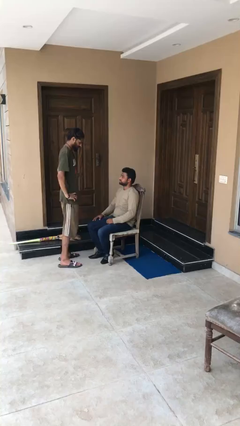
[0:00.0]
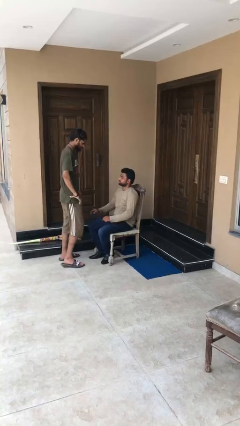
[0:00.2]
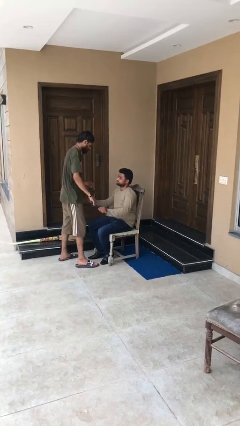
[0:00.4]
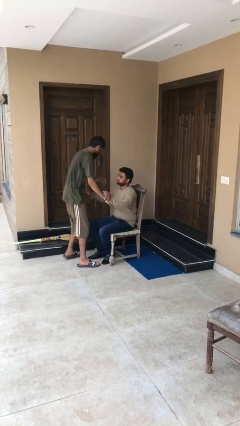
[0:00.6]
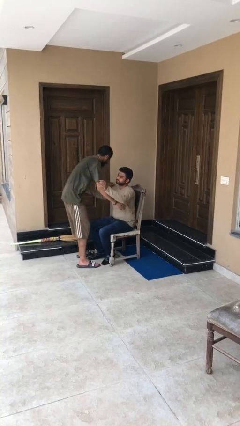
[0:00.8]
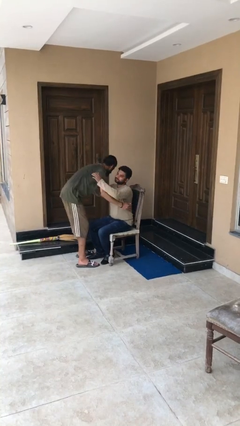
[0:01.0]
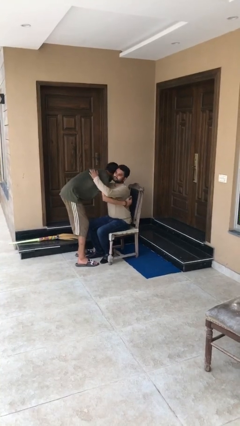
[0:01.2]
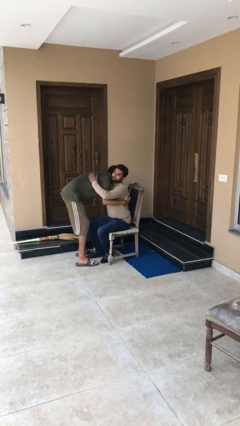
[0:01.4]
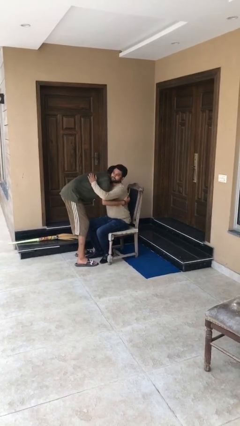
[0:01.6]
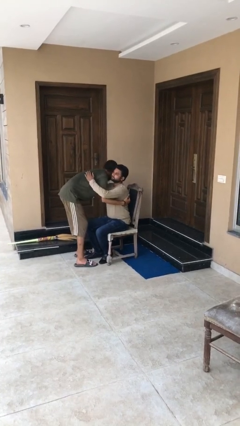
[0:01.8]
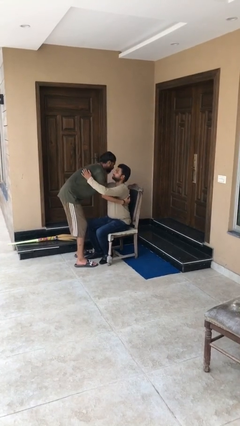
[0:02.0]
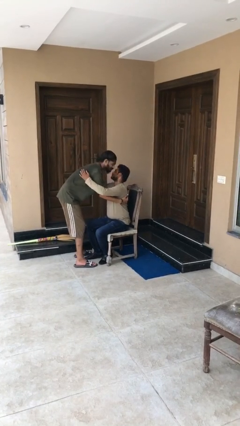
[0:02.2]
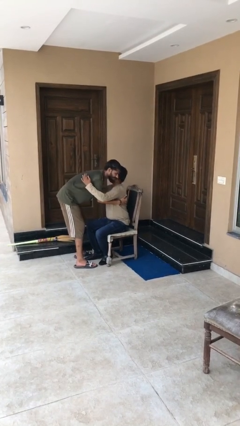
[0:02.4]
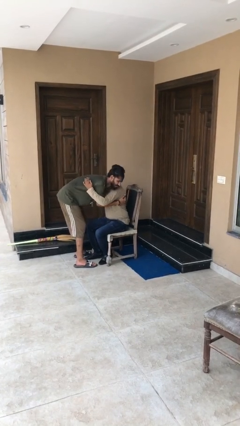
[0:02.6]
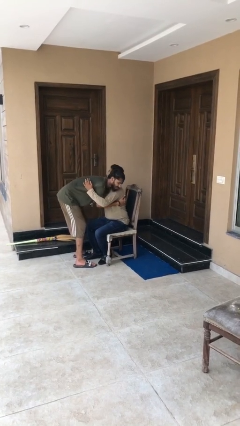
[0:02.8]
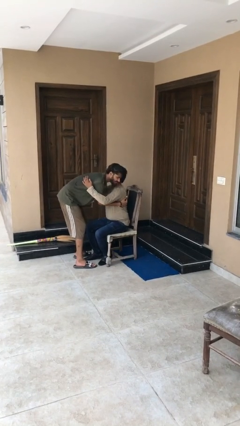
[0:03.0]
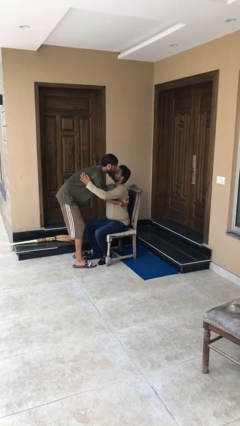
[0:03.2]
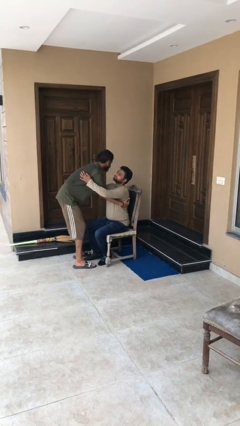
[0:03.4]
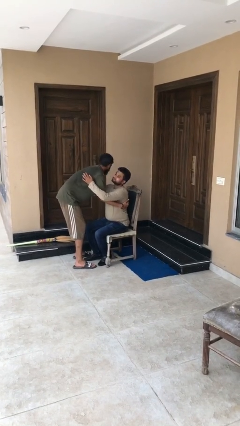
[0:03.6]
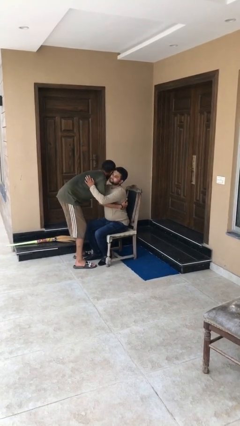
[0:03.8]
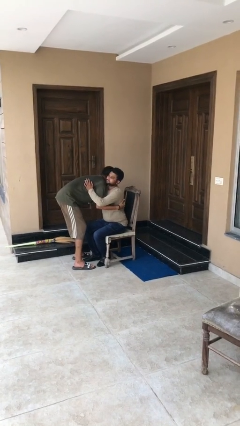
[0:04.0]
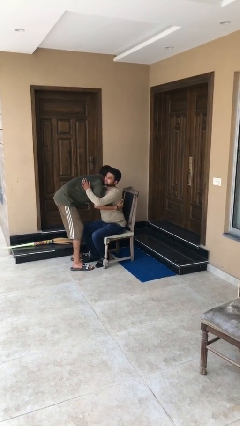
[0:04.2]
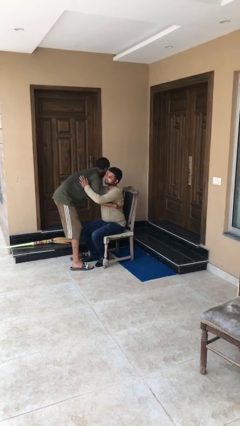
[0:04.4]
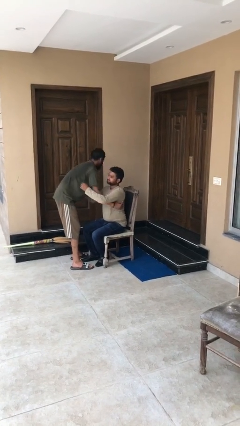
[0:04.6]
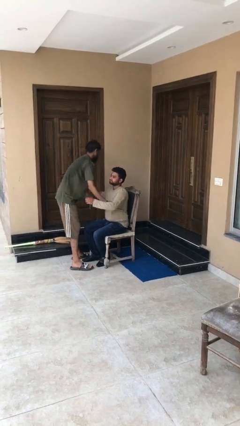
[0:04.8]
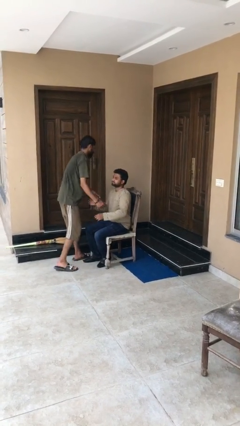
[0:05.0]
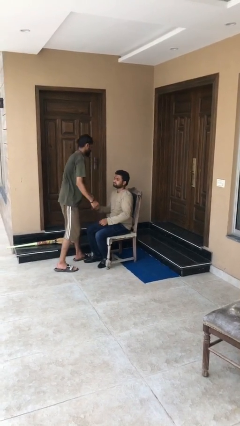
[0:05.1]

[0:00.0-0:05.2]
person embraces person

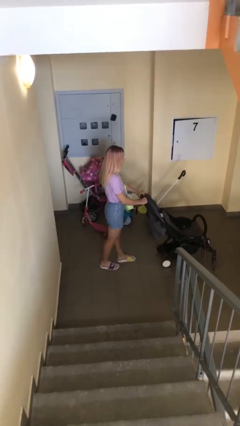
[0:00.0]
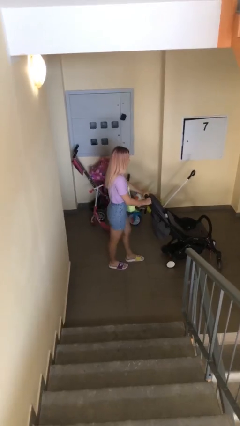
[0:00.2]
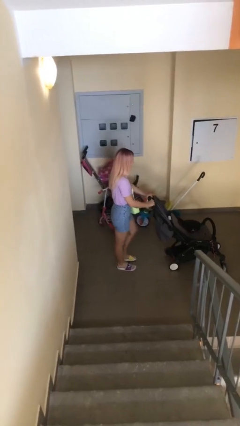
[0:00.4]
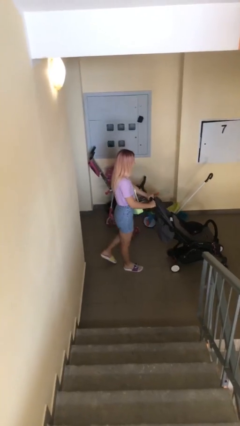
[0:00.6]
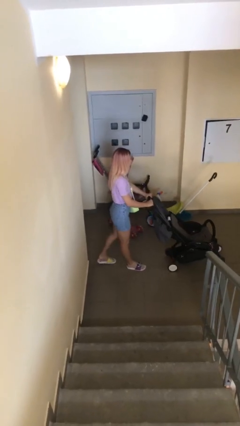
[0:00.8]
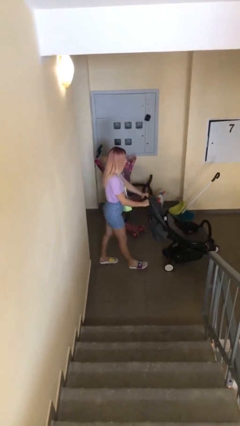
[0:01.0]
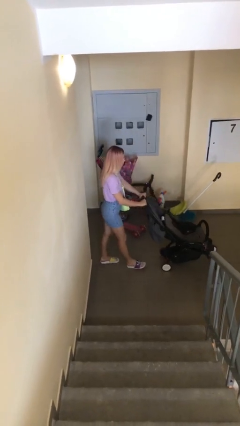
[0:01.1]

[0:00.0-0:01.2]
person pulls wheeled cart

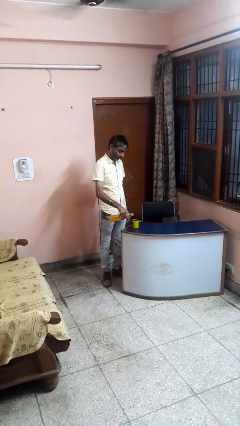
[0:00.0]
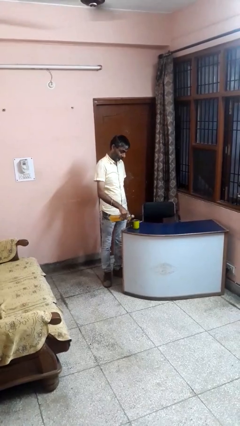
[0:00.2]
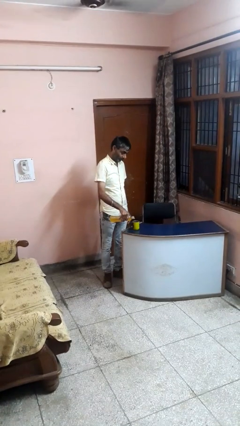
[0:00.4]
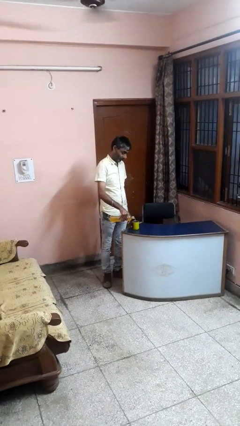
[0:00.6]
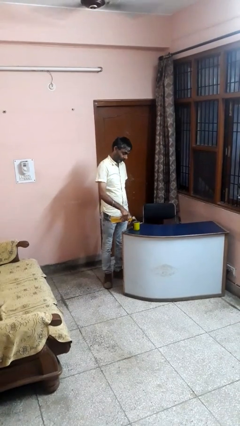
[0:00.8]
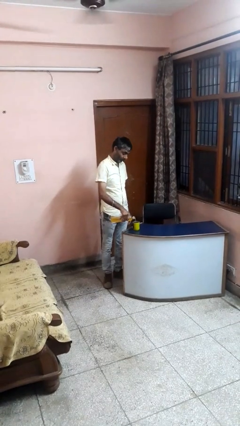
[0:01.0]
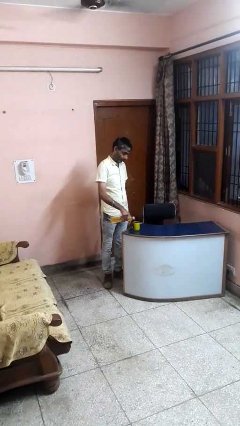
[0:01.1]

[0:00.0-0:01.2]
person pours liquid into cup

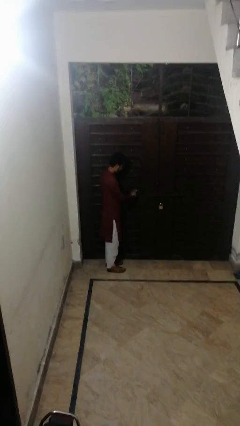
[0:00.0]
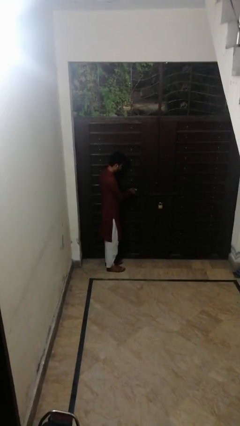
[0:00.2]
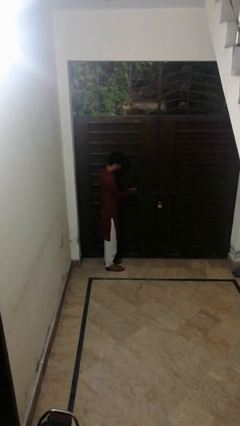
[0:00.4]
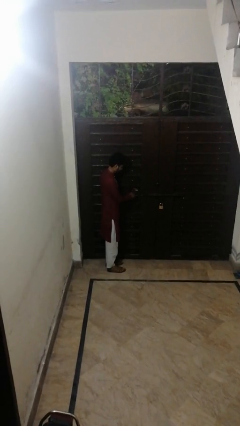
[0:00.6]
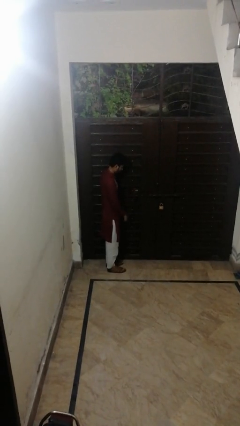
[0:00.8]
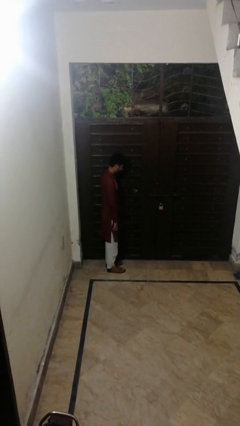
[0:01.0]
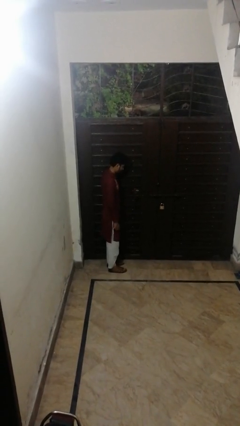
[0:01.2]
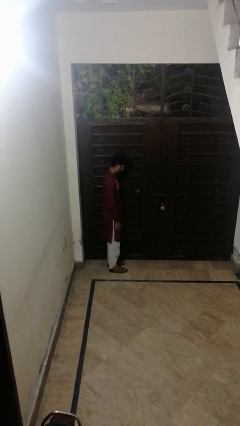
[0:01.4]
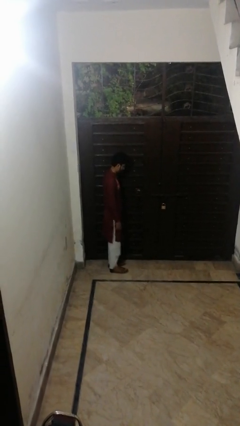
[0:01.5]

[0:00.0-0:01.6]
person locks door with keys

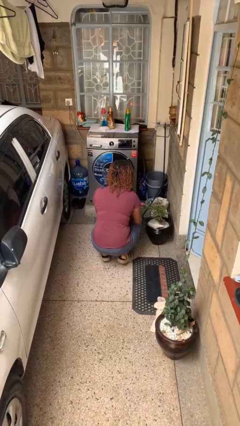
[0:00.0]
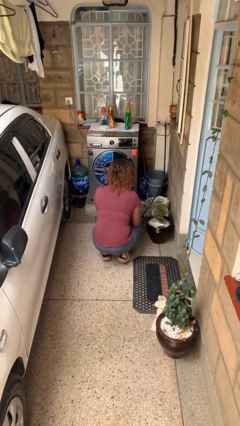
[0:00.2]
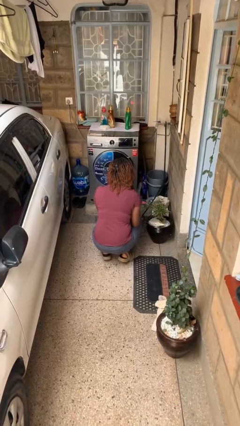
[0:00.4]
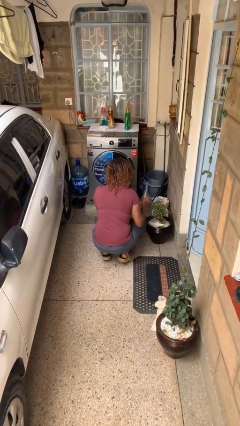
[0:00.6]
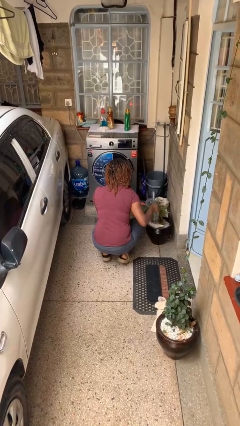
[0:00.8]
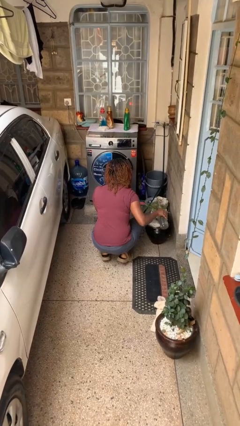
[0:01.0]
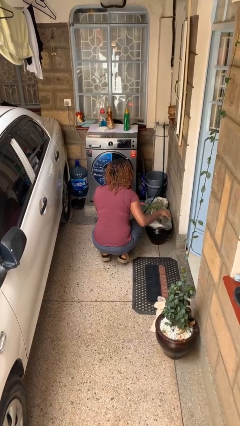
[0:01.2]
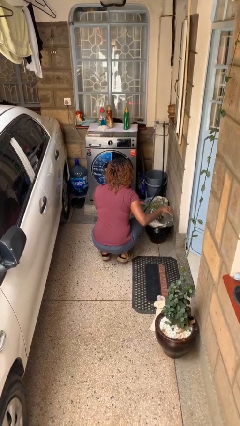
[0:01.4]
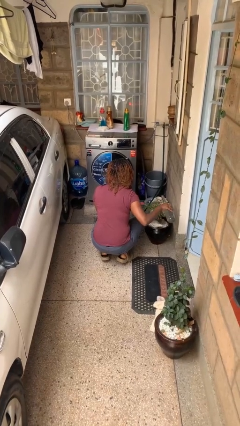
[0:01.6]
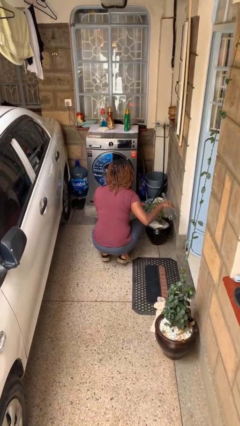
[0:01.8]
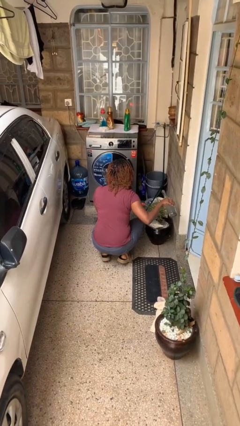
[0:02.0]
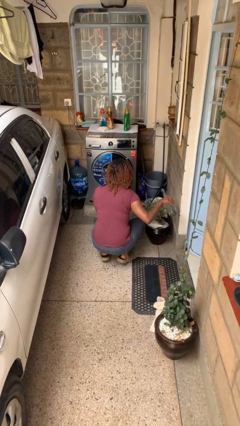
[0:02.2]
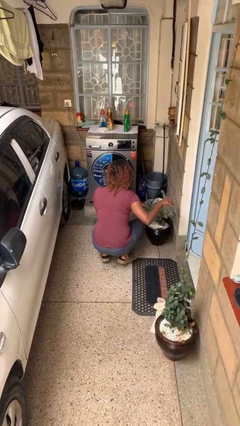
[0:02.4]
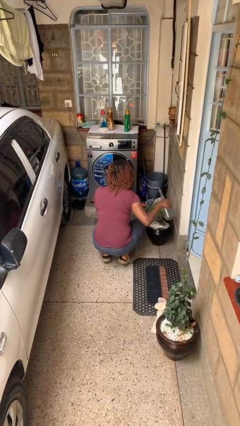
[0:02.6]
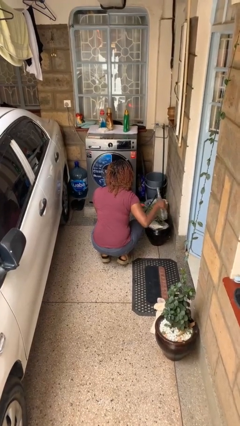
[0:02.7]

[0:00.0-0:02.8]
person waters houseplant

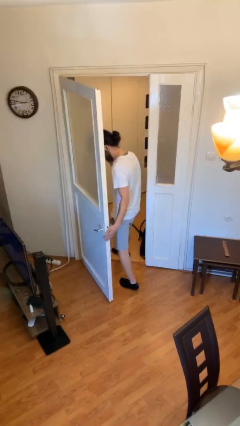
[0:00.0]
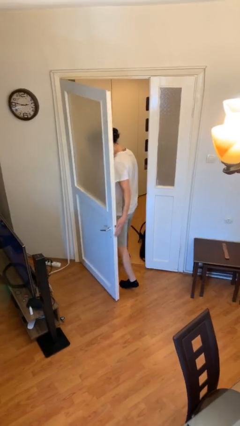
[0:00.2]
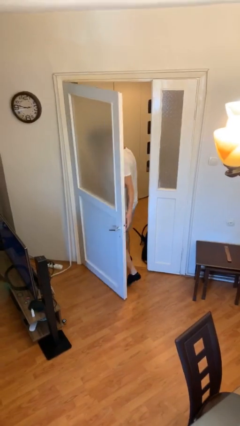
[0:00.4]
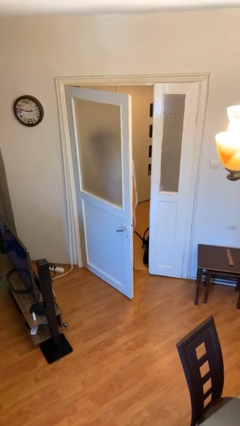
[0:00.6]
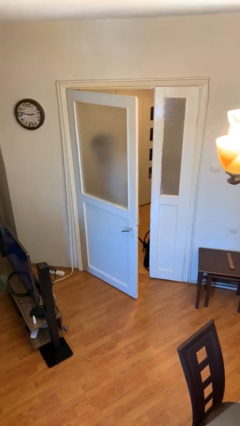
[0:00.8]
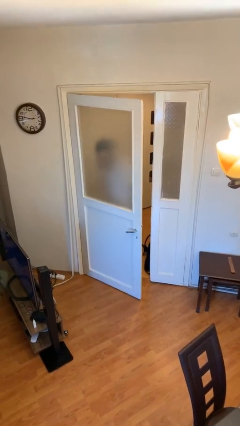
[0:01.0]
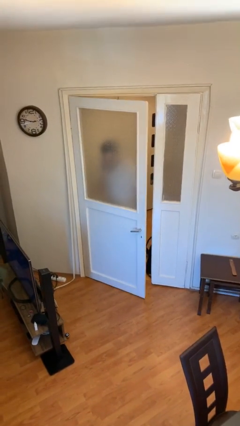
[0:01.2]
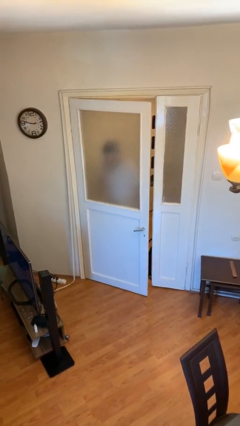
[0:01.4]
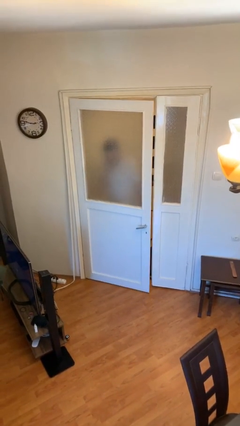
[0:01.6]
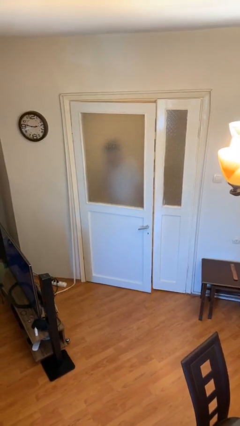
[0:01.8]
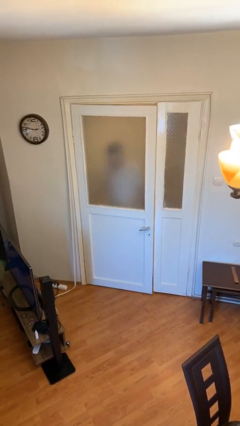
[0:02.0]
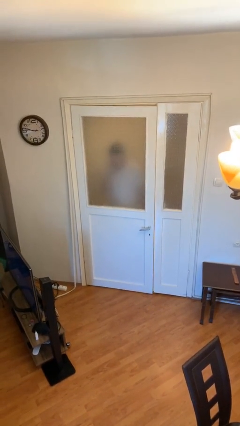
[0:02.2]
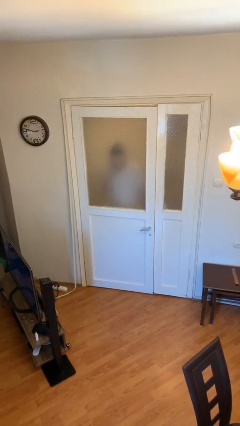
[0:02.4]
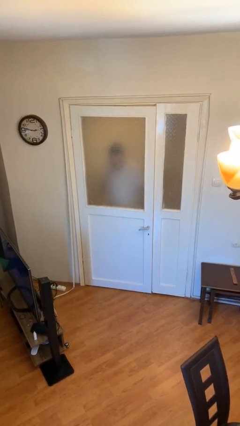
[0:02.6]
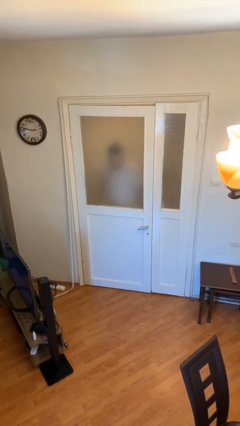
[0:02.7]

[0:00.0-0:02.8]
person closes facility door

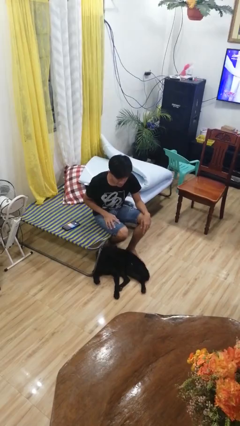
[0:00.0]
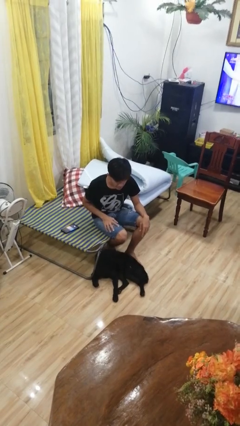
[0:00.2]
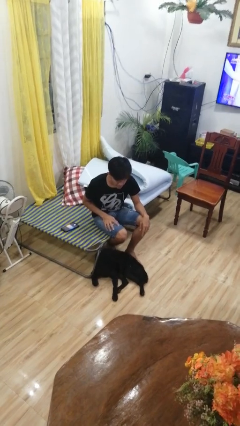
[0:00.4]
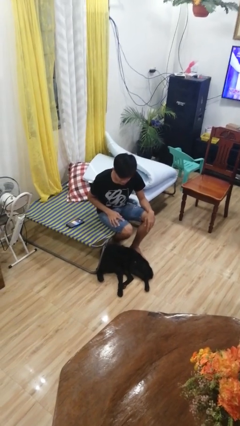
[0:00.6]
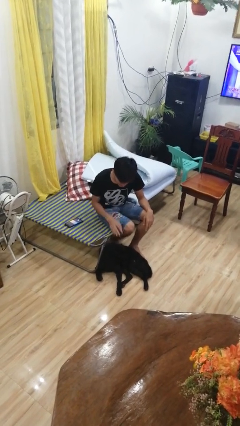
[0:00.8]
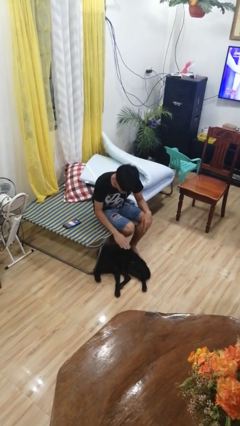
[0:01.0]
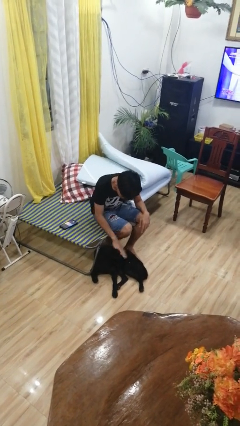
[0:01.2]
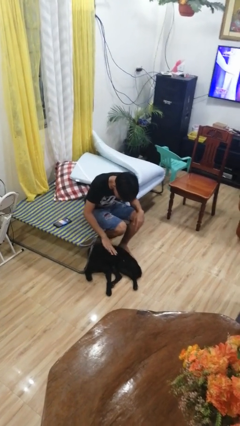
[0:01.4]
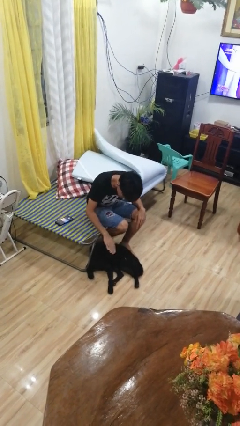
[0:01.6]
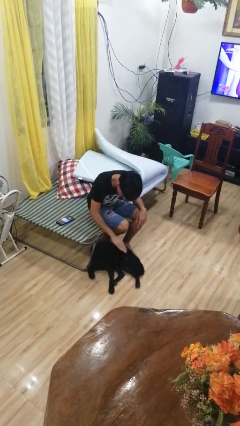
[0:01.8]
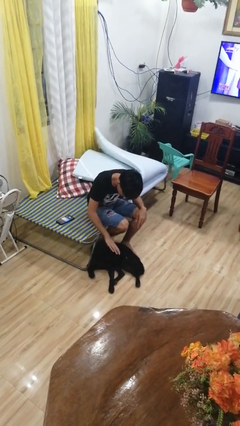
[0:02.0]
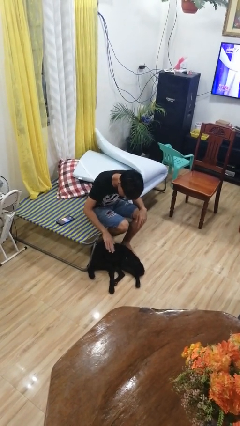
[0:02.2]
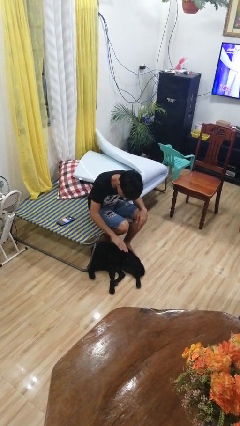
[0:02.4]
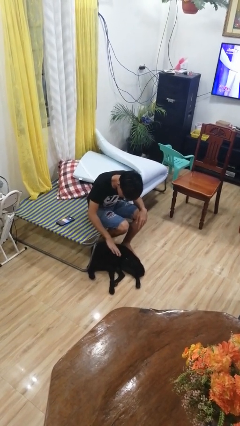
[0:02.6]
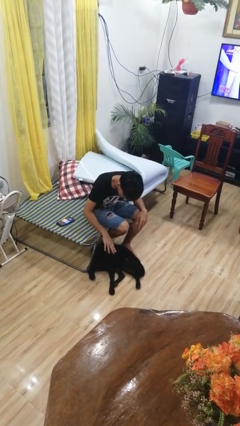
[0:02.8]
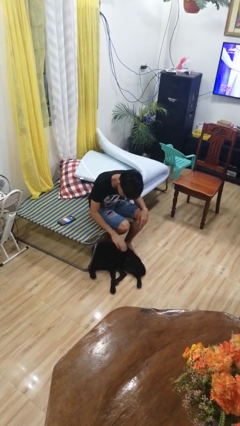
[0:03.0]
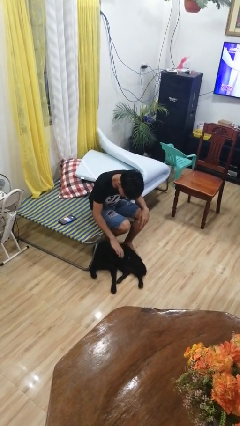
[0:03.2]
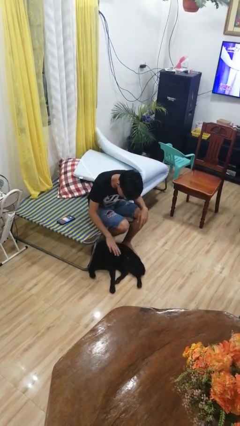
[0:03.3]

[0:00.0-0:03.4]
person pets dog
